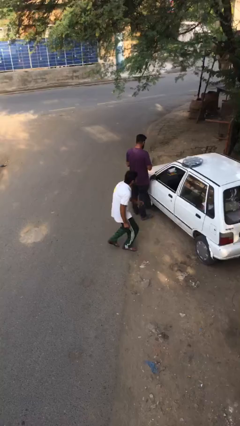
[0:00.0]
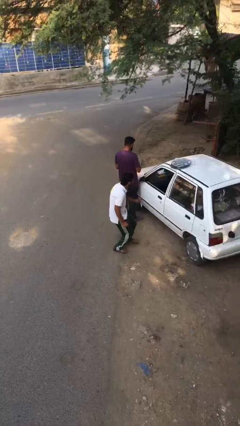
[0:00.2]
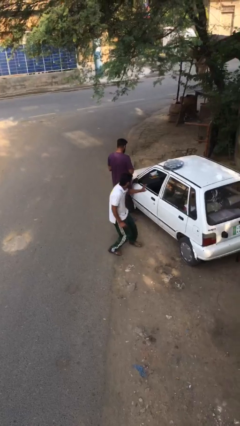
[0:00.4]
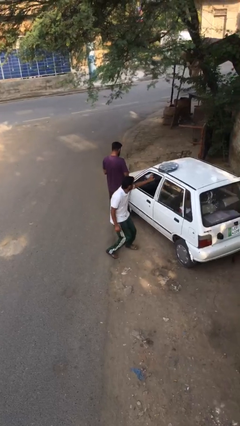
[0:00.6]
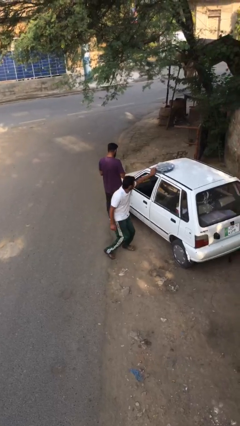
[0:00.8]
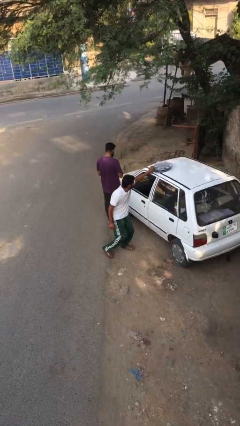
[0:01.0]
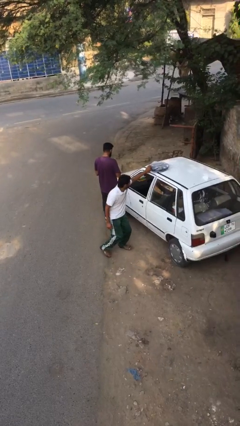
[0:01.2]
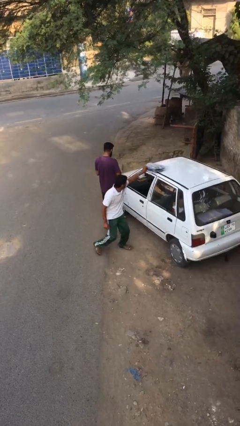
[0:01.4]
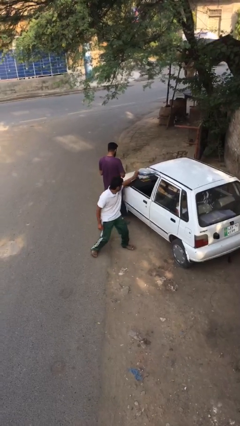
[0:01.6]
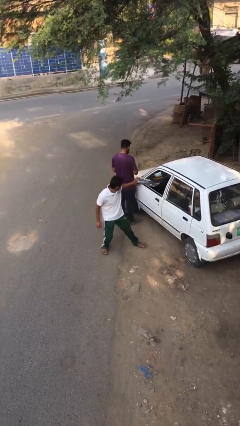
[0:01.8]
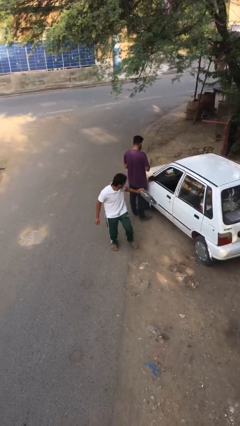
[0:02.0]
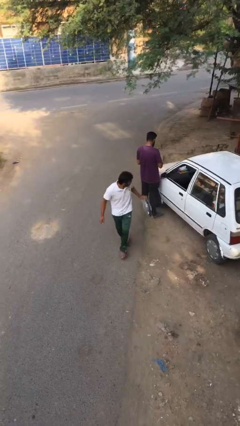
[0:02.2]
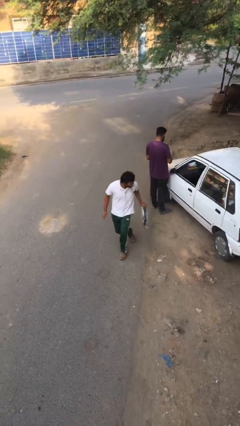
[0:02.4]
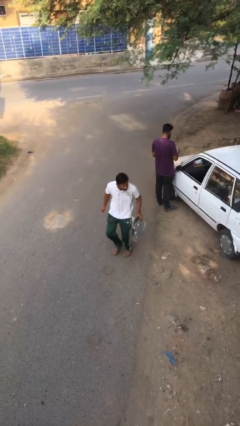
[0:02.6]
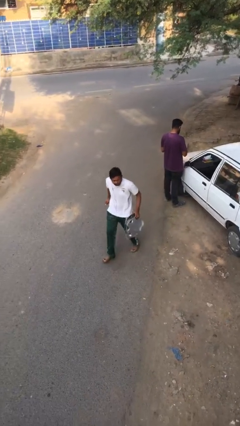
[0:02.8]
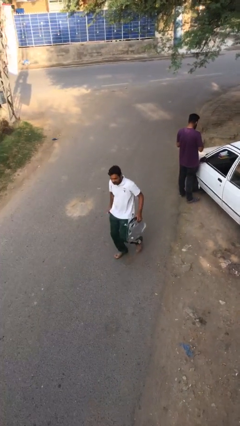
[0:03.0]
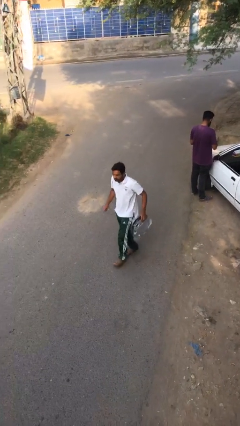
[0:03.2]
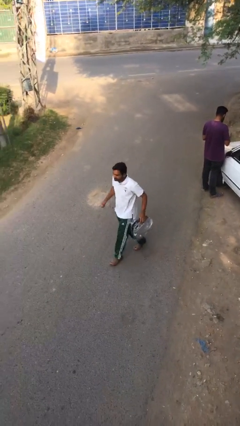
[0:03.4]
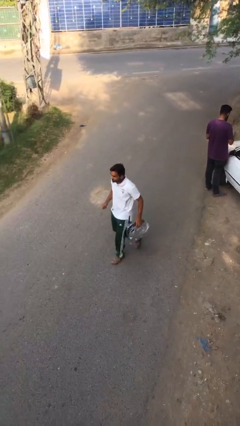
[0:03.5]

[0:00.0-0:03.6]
person steals object from person

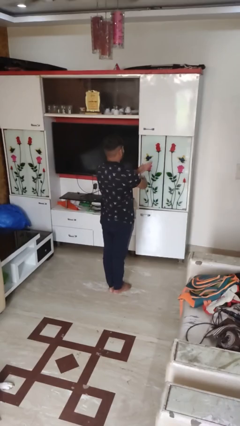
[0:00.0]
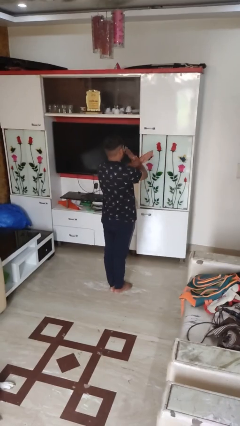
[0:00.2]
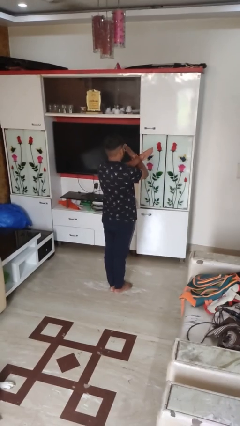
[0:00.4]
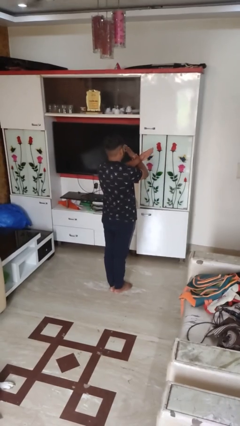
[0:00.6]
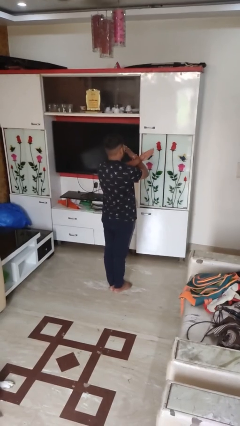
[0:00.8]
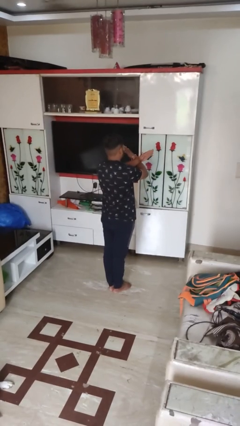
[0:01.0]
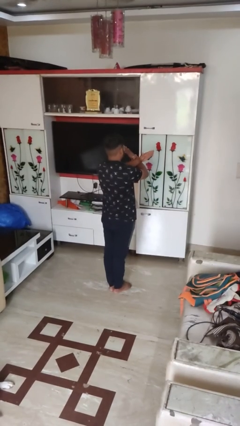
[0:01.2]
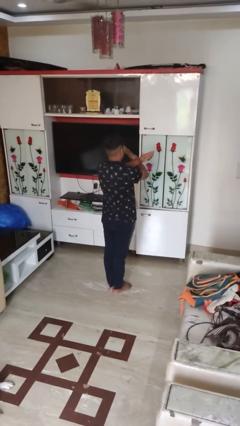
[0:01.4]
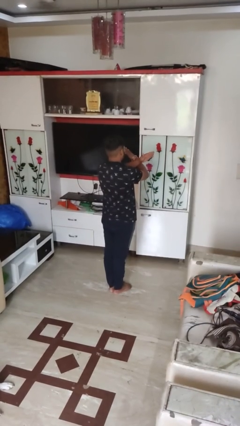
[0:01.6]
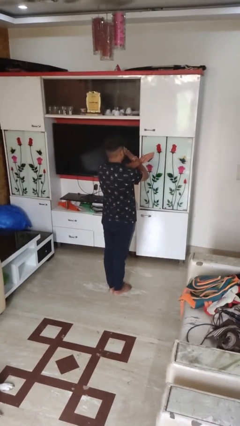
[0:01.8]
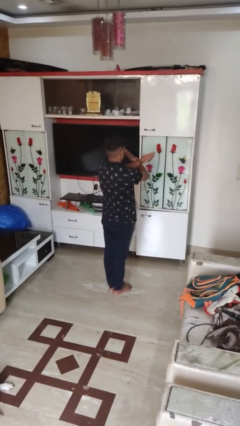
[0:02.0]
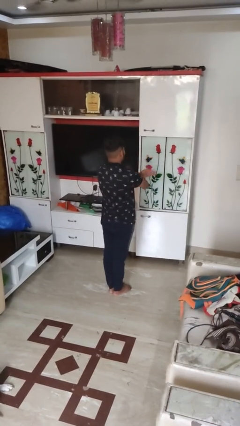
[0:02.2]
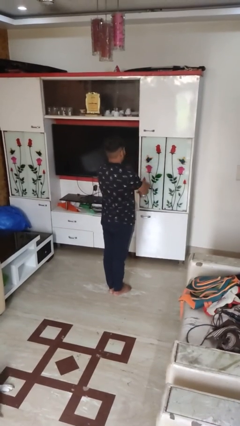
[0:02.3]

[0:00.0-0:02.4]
person gestures arms x

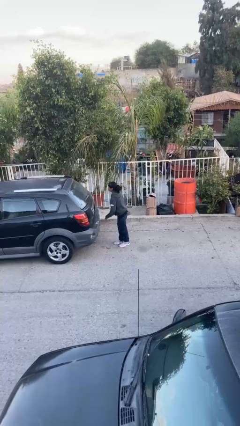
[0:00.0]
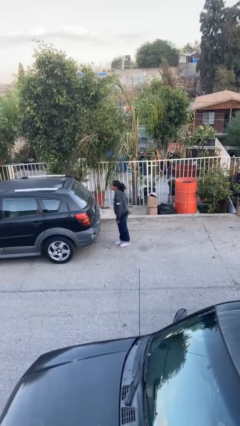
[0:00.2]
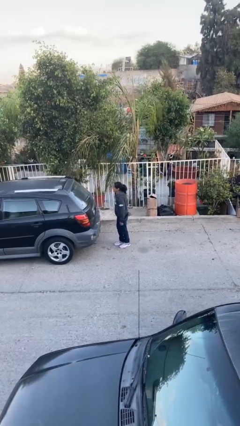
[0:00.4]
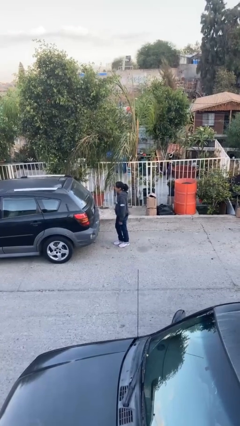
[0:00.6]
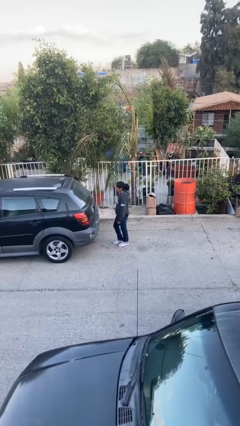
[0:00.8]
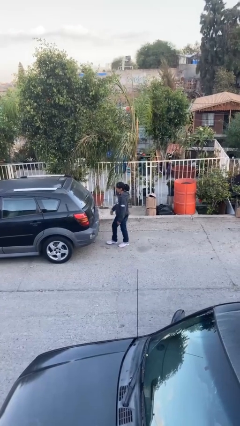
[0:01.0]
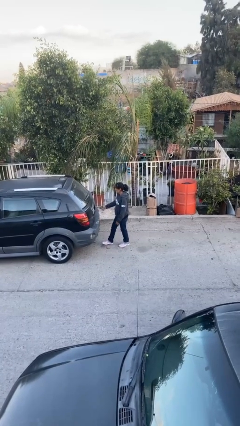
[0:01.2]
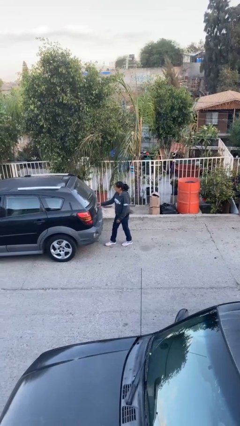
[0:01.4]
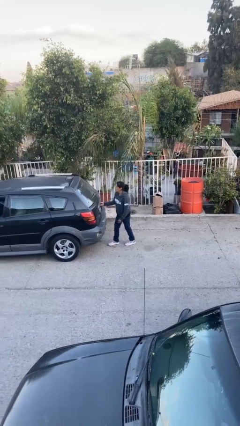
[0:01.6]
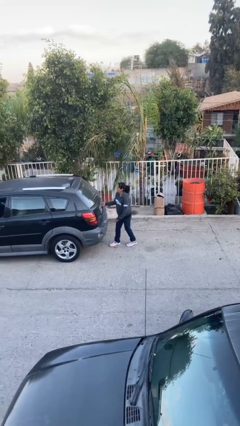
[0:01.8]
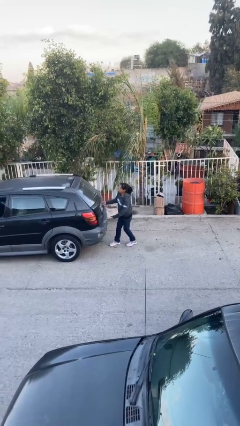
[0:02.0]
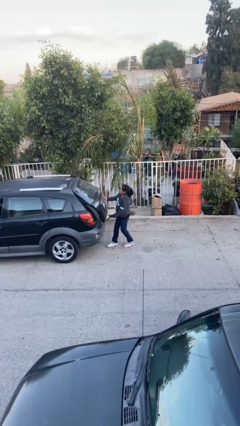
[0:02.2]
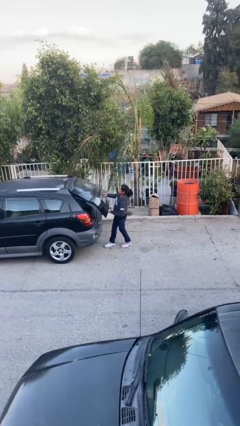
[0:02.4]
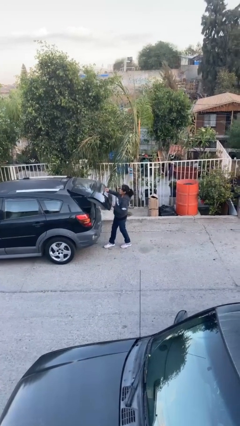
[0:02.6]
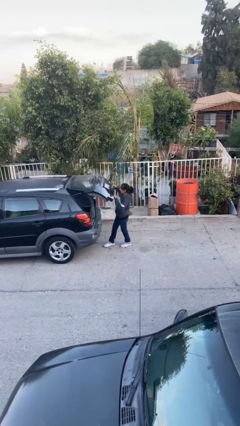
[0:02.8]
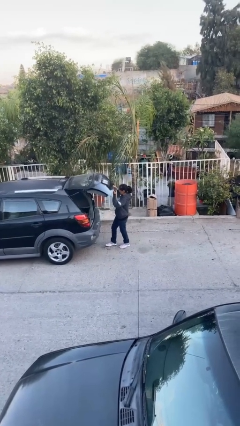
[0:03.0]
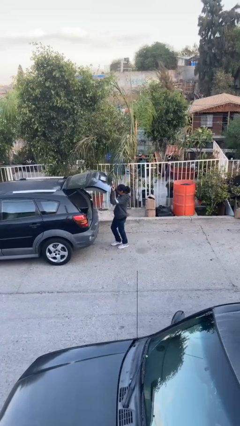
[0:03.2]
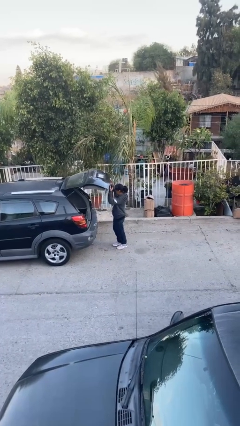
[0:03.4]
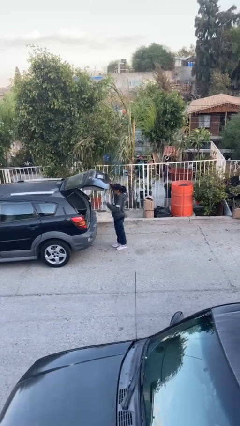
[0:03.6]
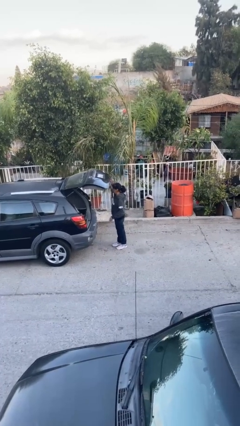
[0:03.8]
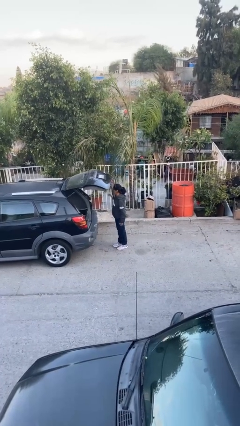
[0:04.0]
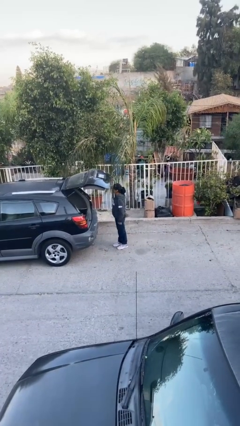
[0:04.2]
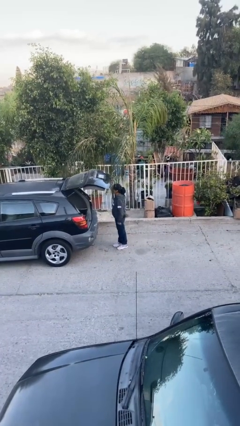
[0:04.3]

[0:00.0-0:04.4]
person opens car trunk

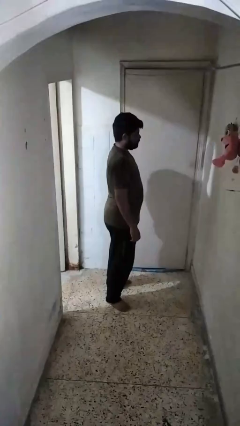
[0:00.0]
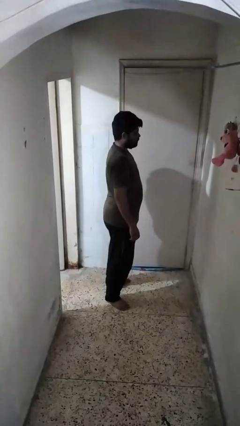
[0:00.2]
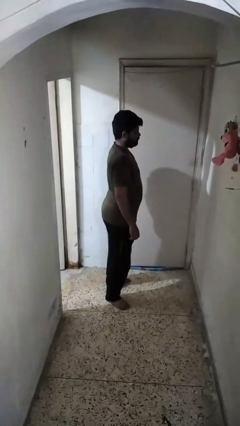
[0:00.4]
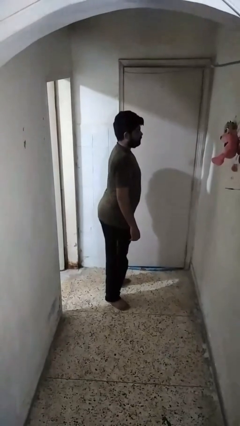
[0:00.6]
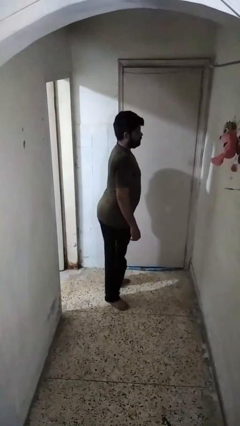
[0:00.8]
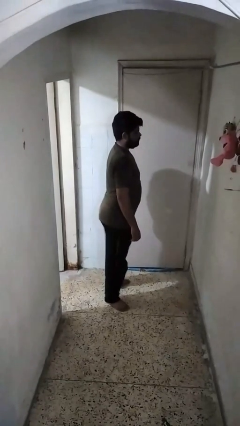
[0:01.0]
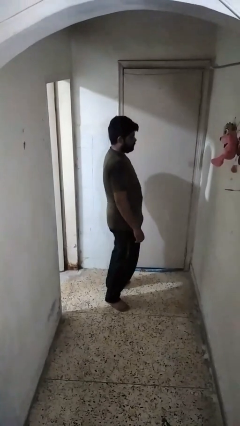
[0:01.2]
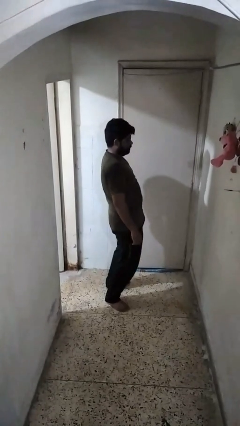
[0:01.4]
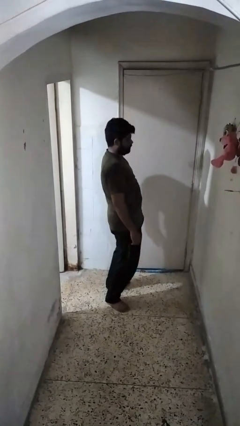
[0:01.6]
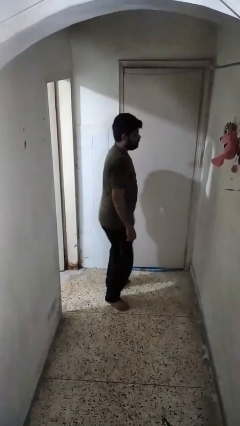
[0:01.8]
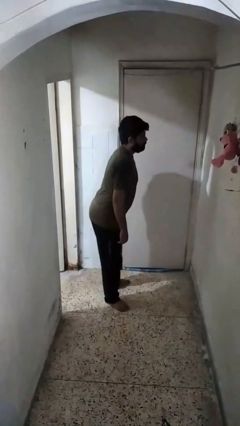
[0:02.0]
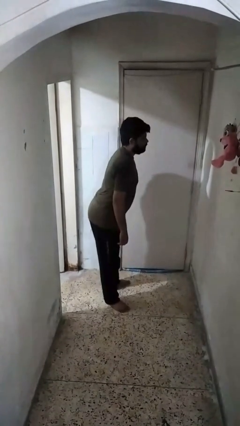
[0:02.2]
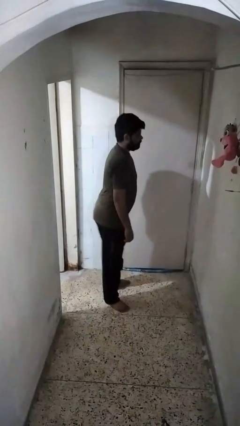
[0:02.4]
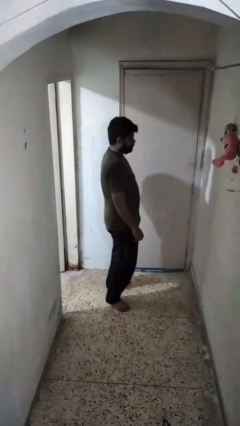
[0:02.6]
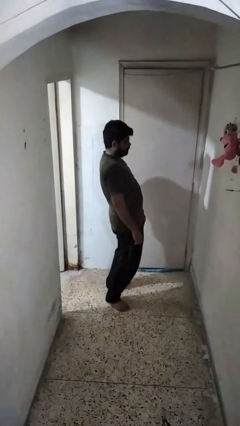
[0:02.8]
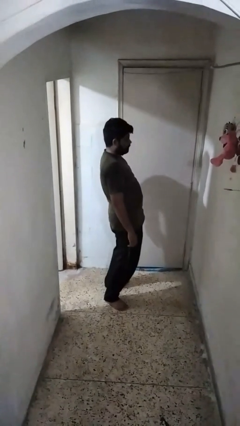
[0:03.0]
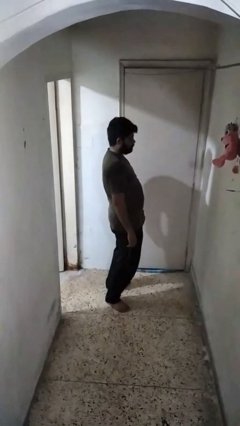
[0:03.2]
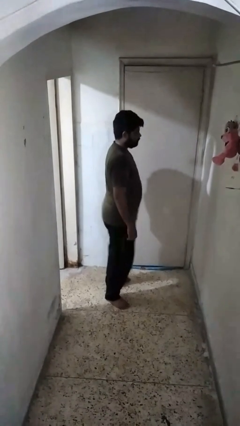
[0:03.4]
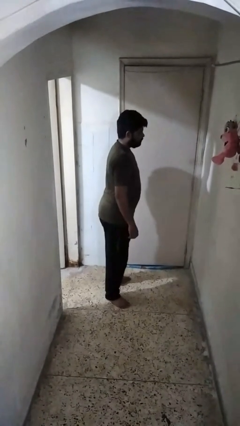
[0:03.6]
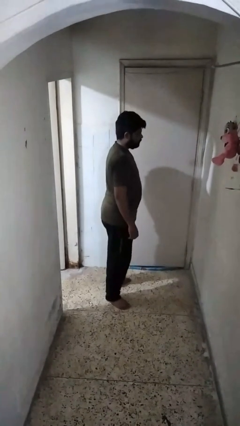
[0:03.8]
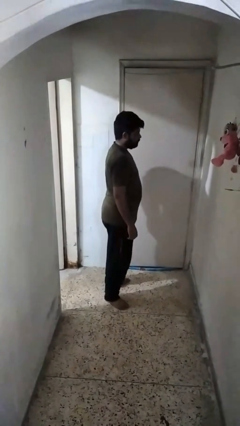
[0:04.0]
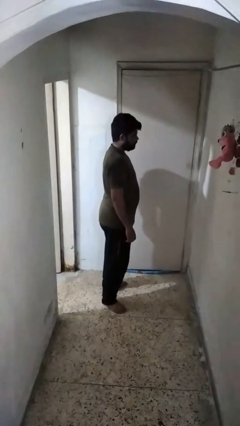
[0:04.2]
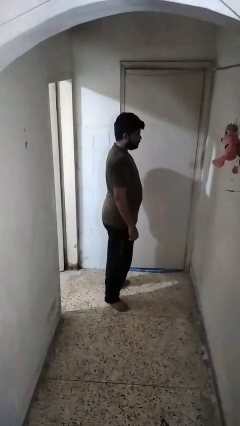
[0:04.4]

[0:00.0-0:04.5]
person wiggles hips

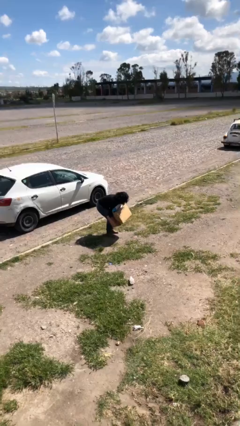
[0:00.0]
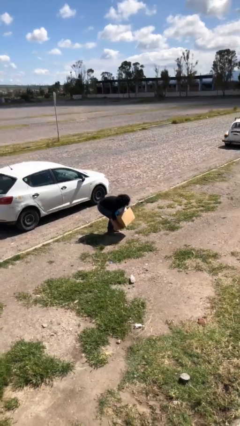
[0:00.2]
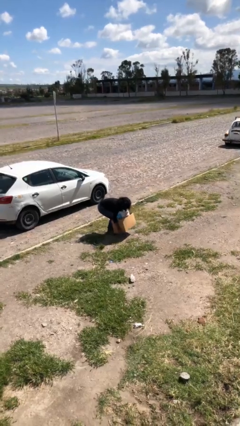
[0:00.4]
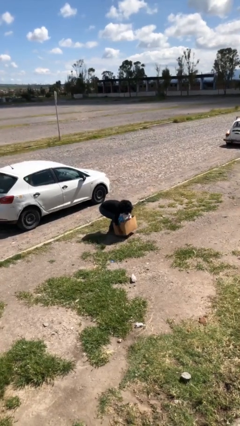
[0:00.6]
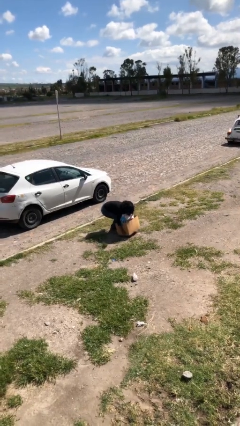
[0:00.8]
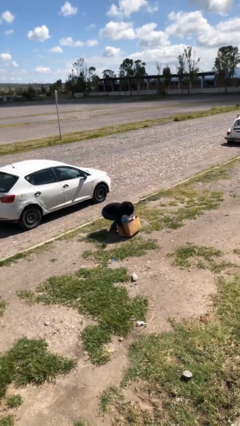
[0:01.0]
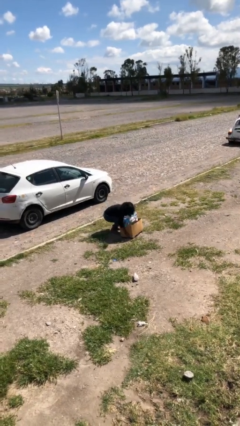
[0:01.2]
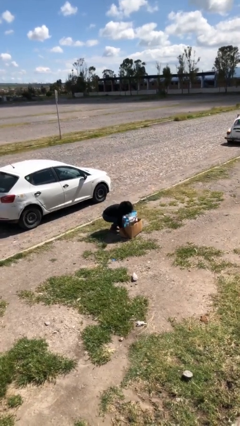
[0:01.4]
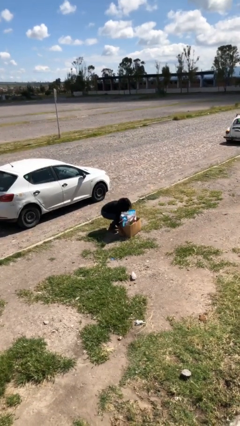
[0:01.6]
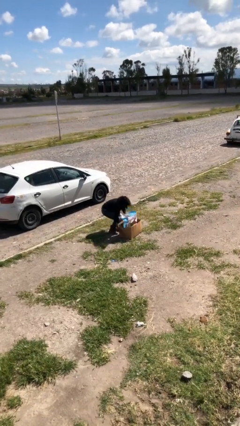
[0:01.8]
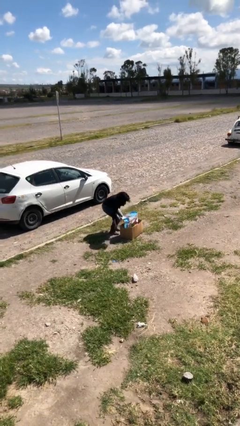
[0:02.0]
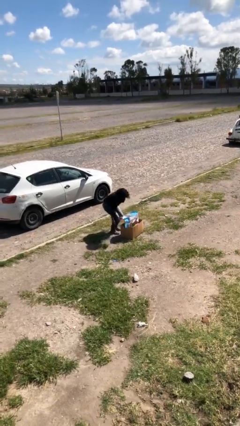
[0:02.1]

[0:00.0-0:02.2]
person puts down object on floor

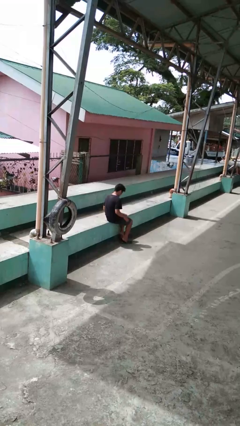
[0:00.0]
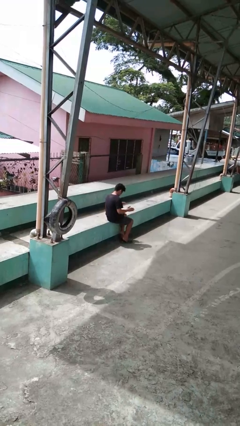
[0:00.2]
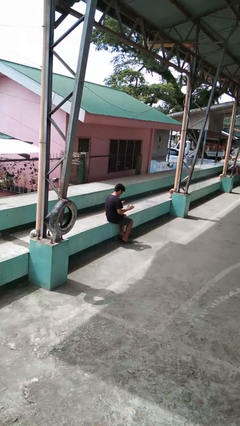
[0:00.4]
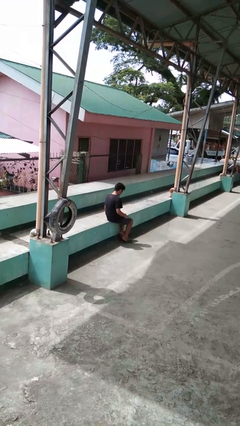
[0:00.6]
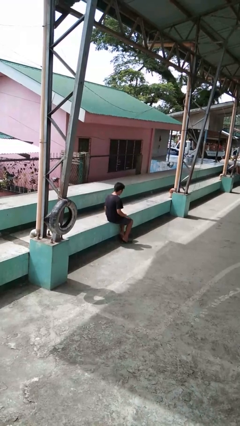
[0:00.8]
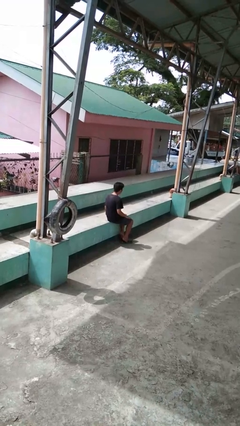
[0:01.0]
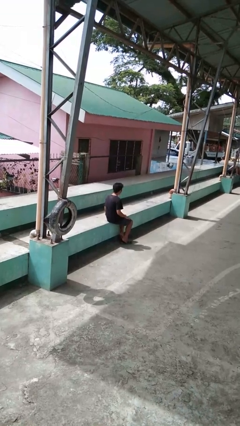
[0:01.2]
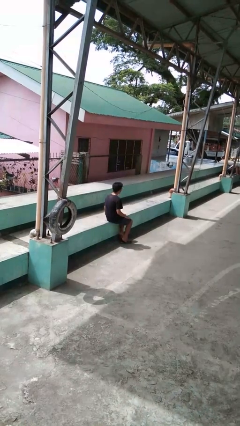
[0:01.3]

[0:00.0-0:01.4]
person slaps hands on thighs
